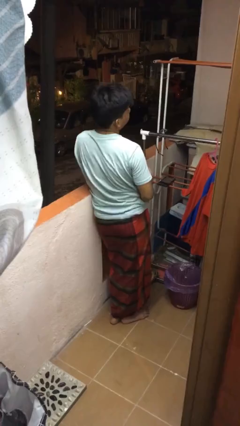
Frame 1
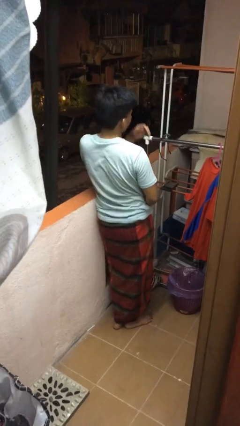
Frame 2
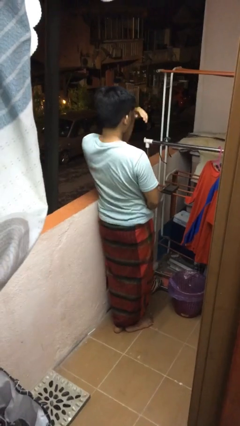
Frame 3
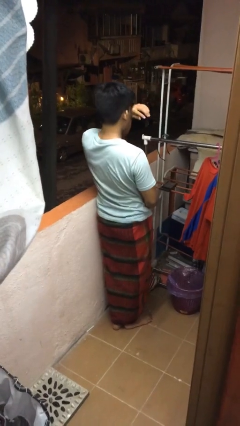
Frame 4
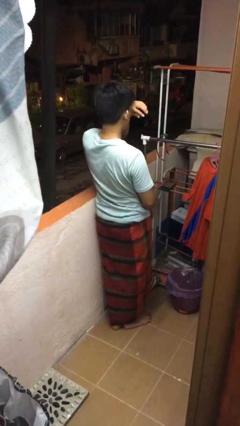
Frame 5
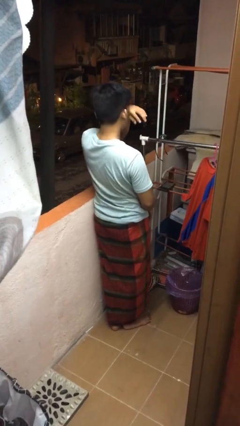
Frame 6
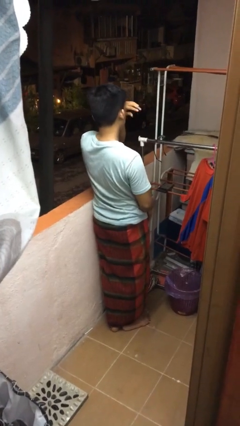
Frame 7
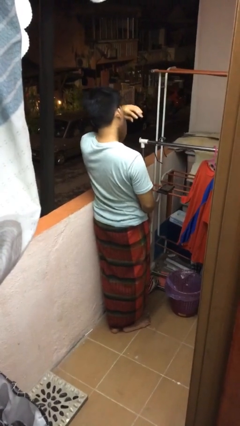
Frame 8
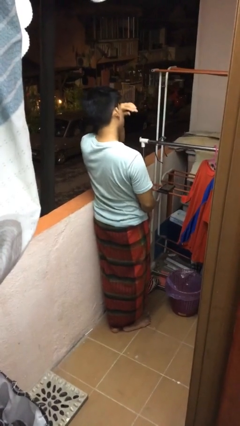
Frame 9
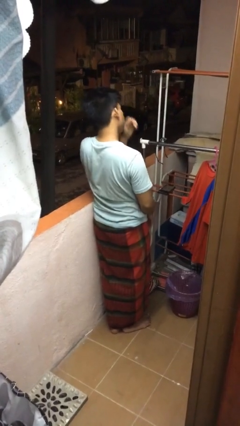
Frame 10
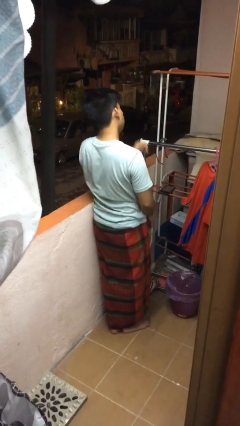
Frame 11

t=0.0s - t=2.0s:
person rubs eyes

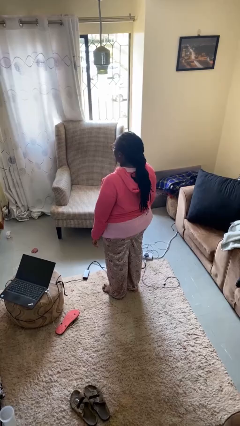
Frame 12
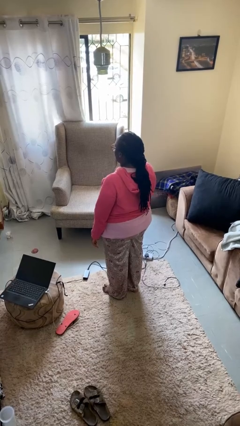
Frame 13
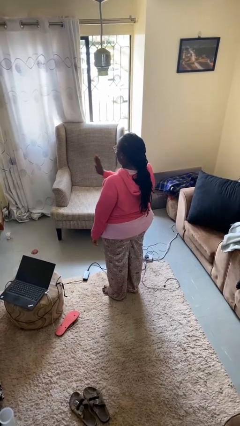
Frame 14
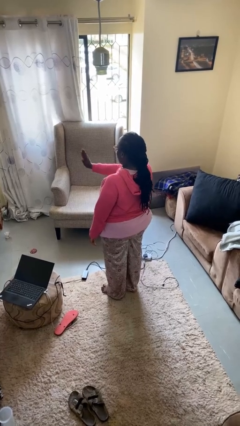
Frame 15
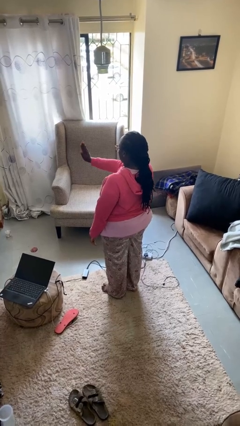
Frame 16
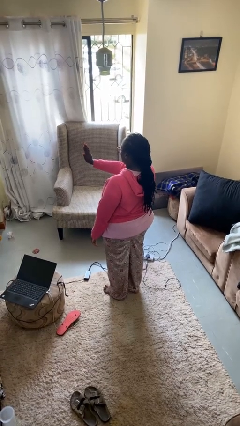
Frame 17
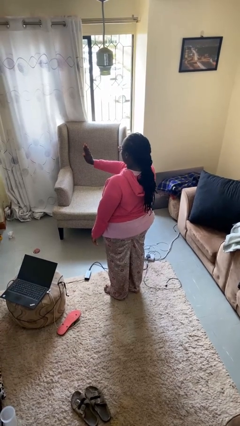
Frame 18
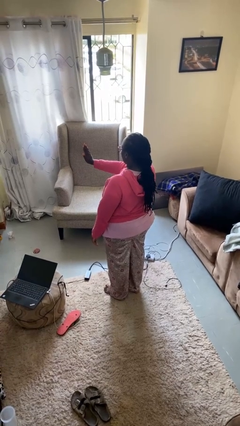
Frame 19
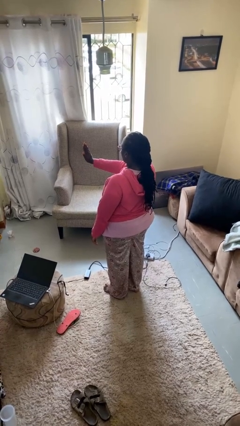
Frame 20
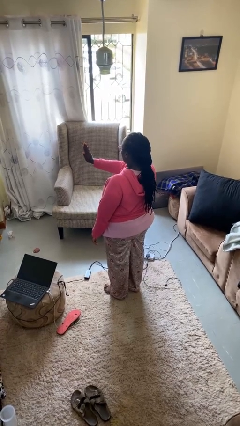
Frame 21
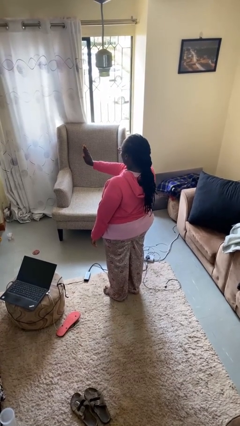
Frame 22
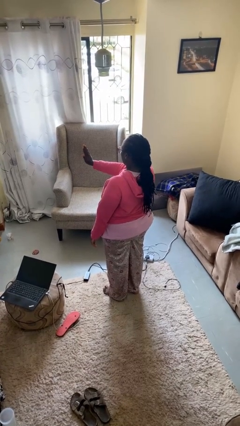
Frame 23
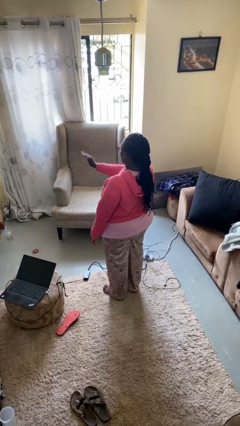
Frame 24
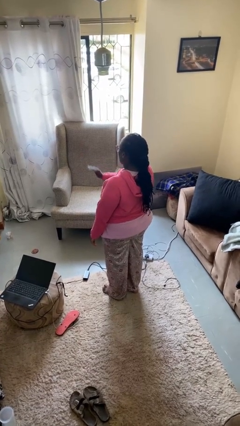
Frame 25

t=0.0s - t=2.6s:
person gestures stop

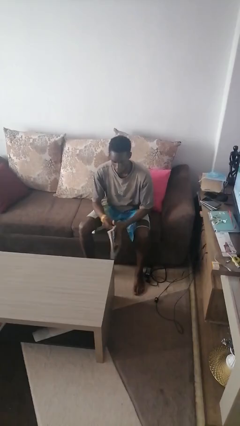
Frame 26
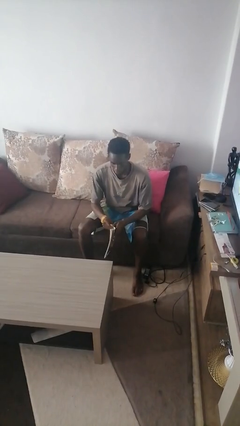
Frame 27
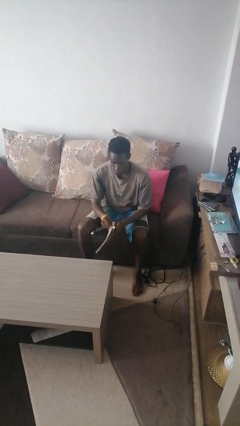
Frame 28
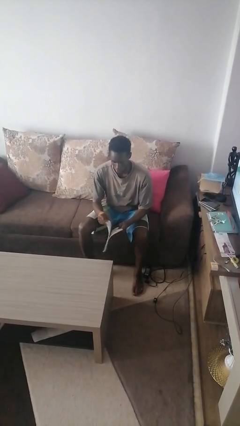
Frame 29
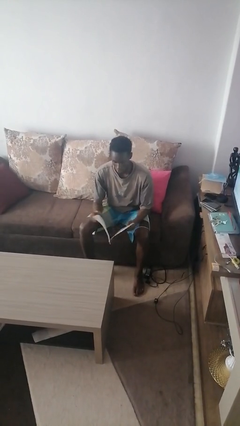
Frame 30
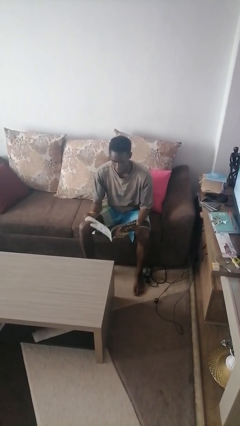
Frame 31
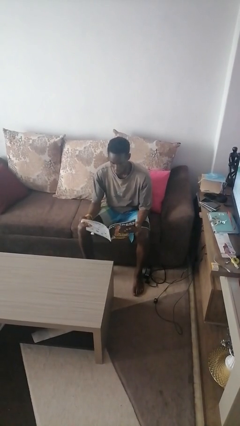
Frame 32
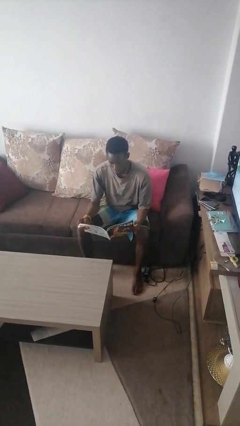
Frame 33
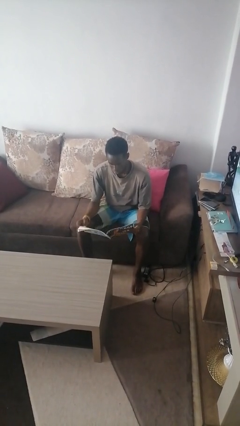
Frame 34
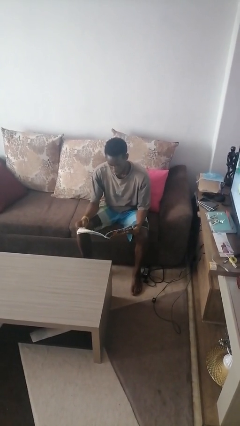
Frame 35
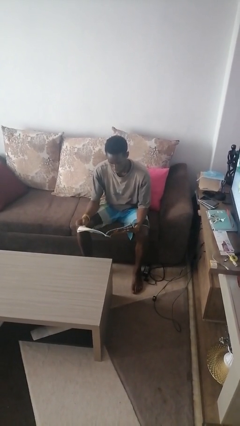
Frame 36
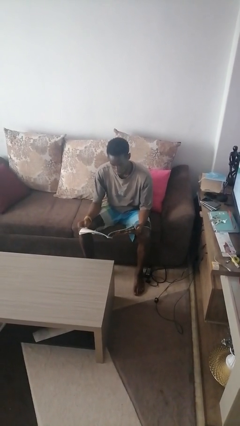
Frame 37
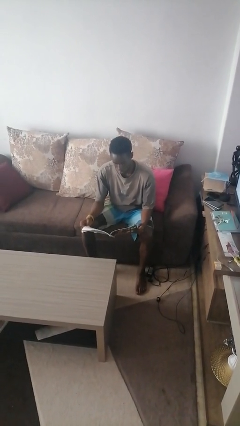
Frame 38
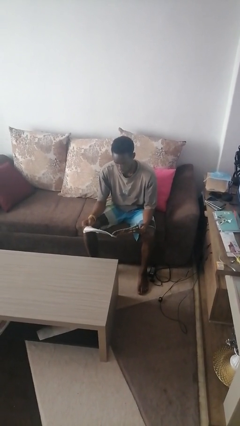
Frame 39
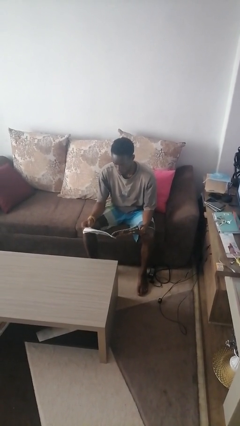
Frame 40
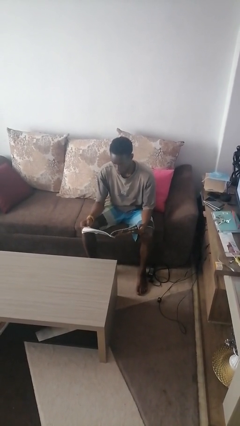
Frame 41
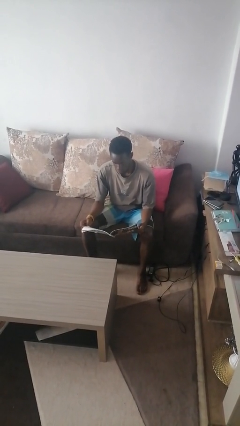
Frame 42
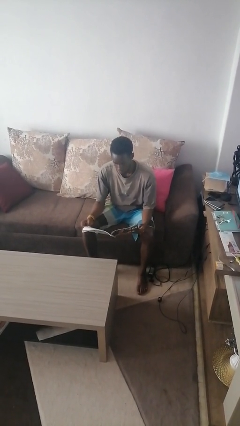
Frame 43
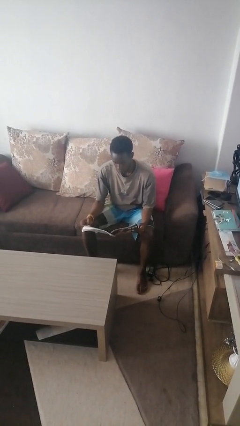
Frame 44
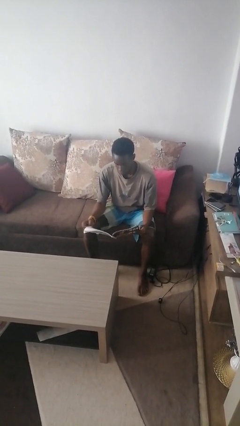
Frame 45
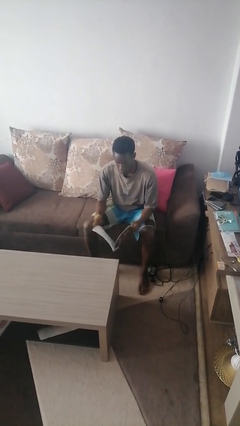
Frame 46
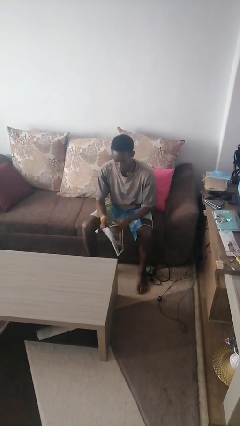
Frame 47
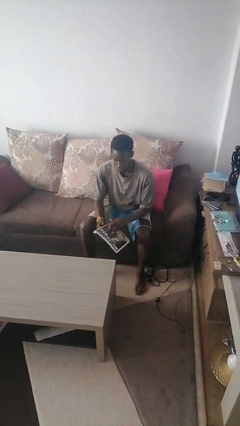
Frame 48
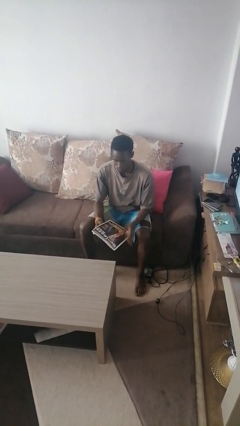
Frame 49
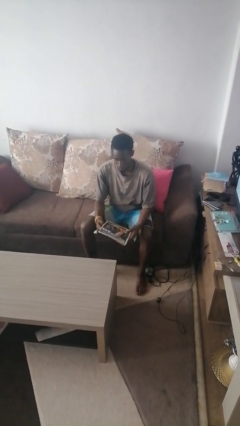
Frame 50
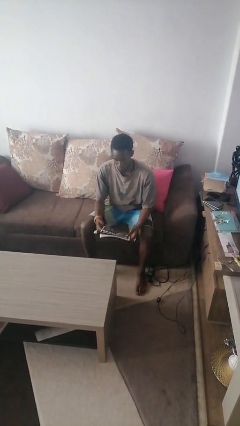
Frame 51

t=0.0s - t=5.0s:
person reads magazine

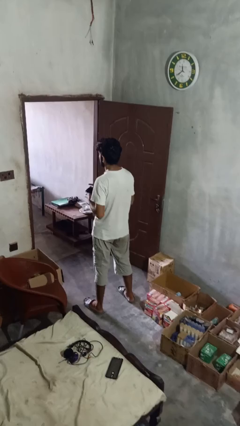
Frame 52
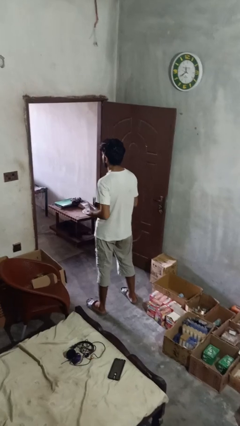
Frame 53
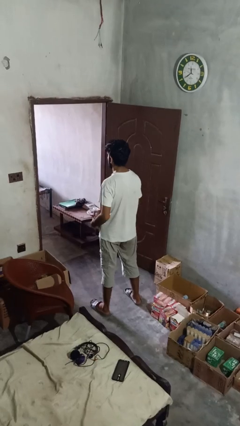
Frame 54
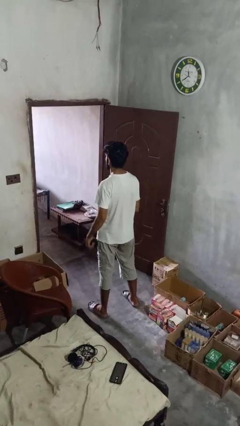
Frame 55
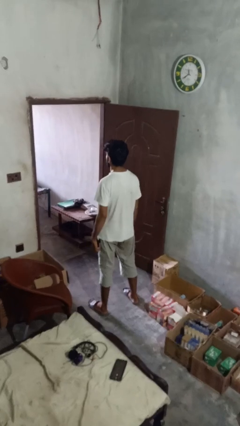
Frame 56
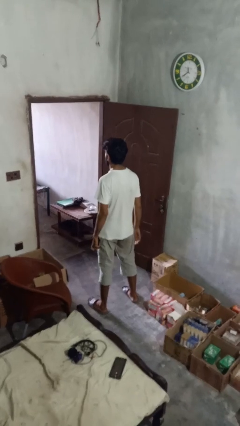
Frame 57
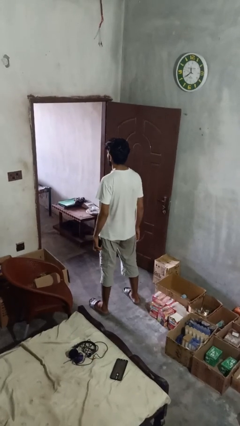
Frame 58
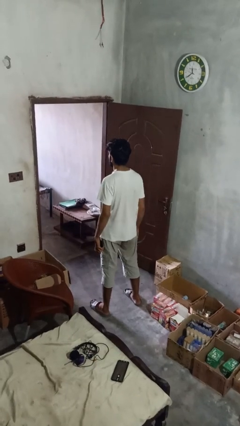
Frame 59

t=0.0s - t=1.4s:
person puts object into purse

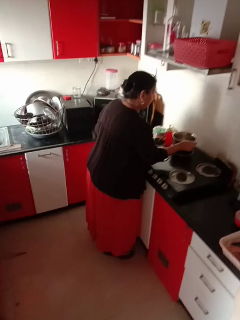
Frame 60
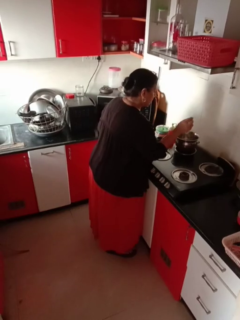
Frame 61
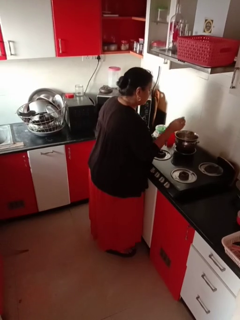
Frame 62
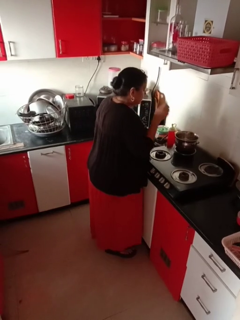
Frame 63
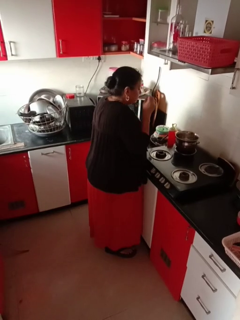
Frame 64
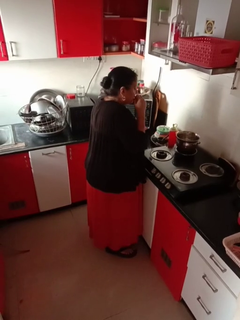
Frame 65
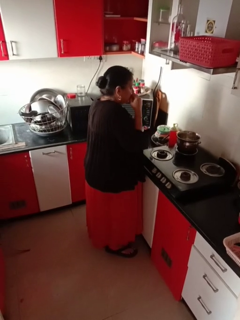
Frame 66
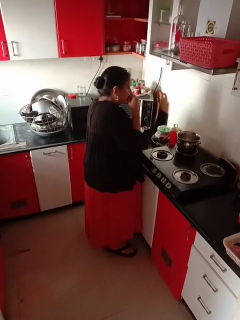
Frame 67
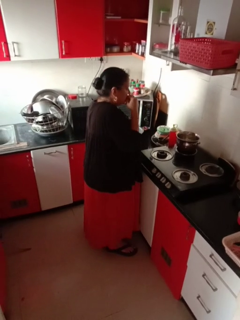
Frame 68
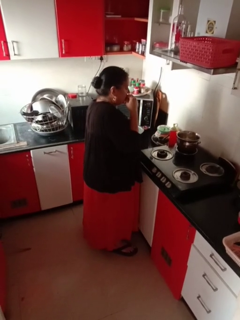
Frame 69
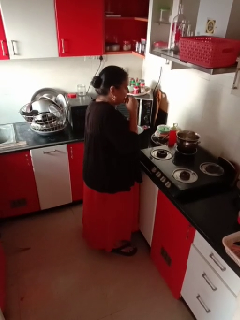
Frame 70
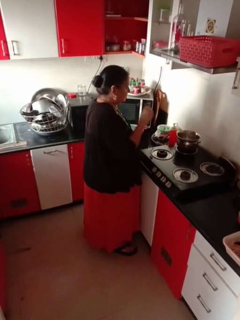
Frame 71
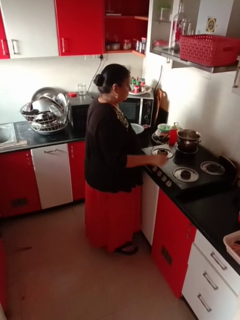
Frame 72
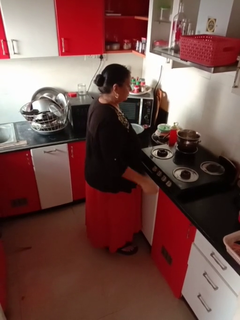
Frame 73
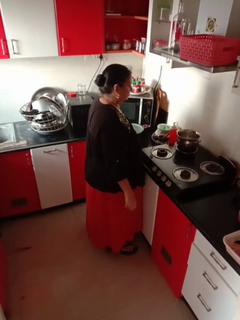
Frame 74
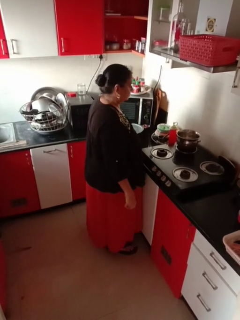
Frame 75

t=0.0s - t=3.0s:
person burns hand

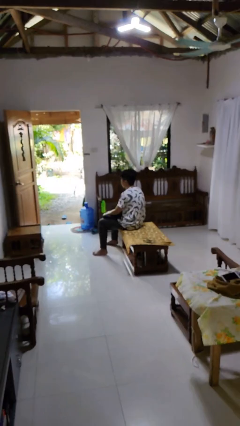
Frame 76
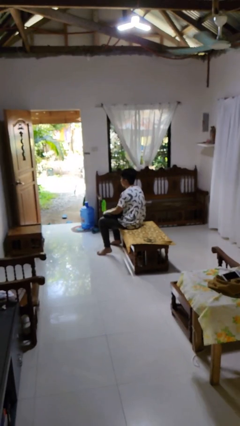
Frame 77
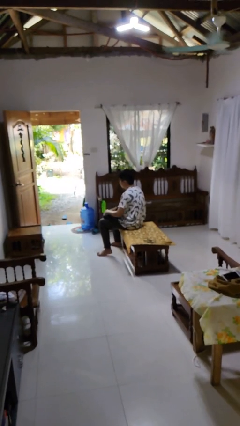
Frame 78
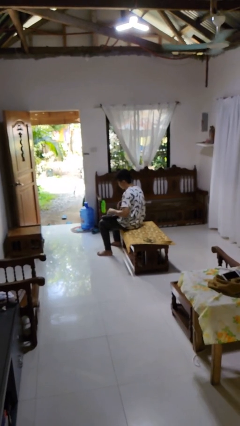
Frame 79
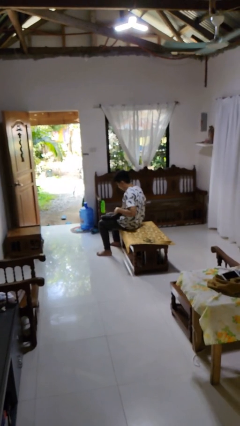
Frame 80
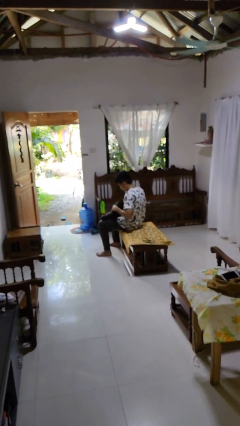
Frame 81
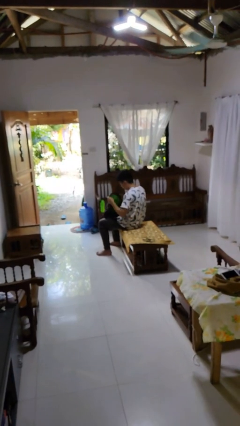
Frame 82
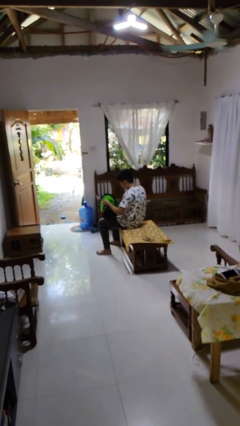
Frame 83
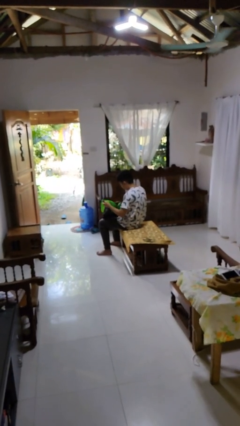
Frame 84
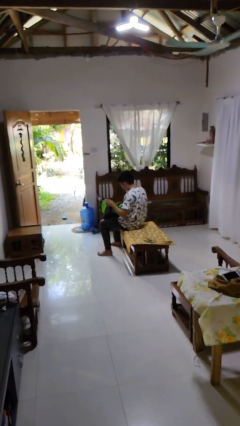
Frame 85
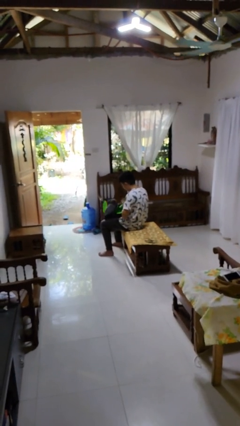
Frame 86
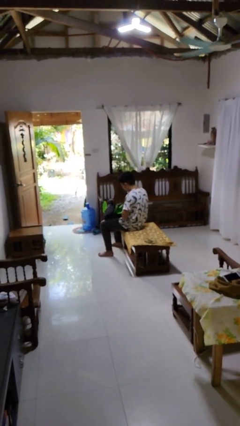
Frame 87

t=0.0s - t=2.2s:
person searches in backpack

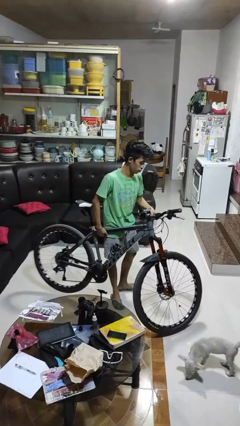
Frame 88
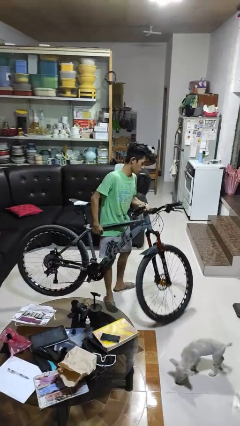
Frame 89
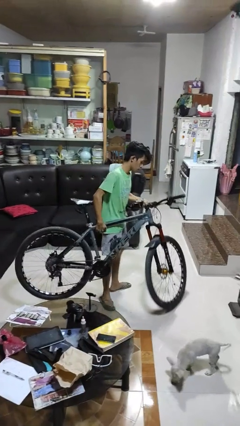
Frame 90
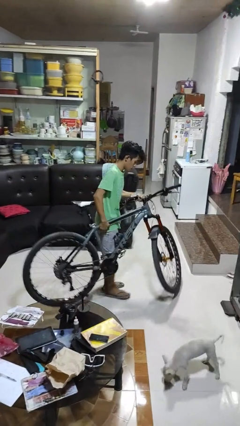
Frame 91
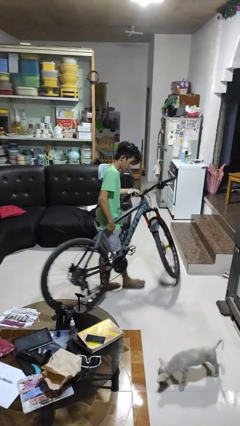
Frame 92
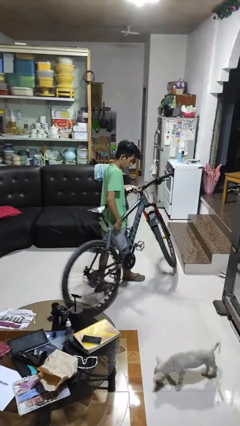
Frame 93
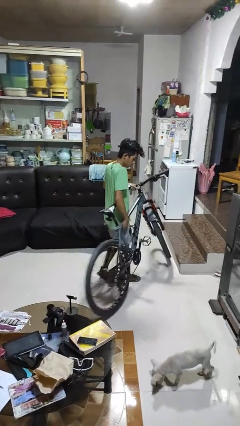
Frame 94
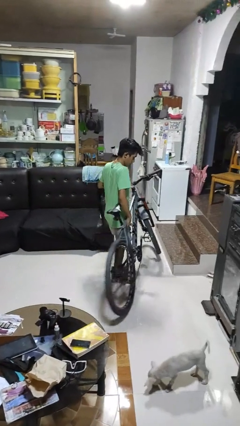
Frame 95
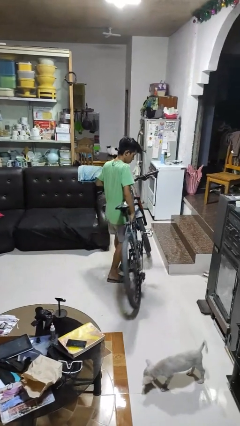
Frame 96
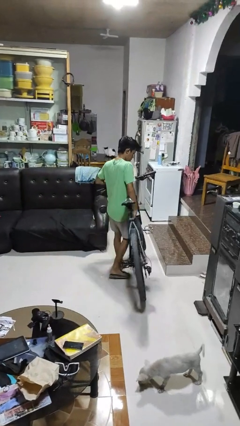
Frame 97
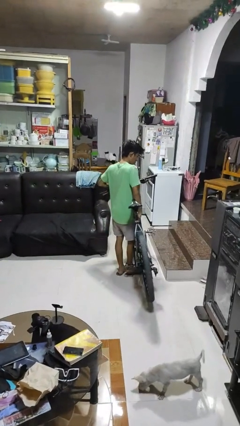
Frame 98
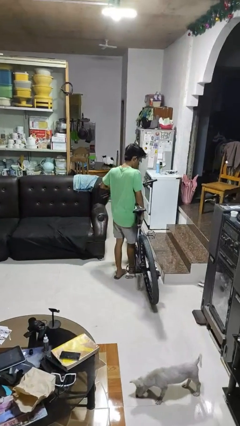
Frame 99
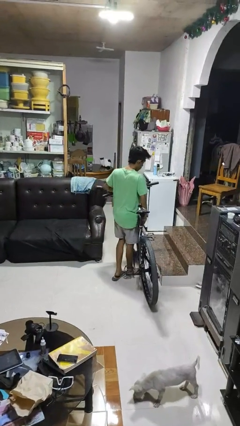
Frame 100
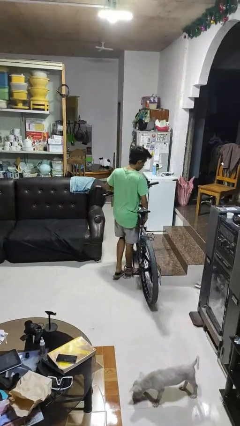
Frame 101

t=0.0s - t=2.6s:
person carries bicycle
